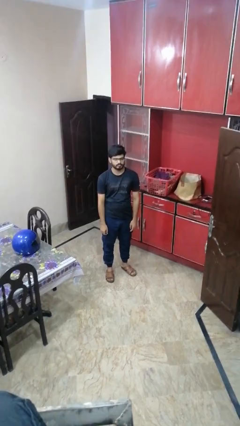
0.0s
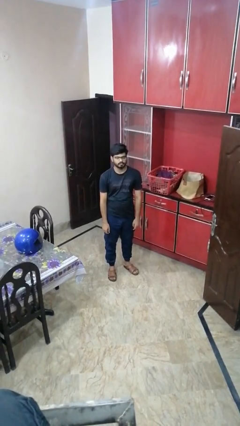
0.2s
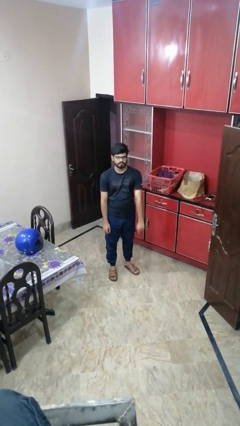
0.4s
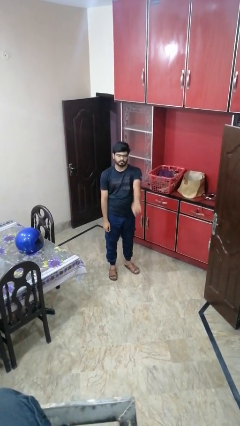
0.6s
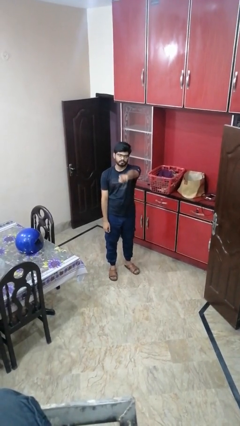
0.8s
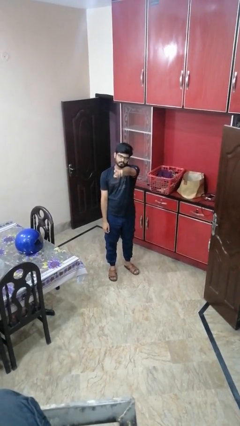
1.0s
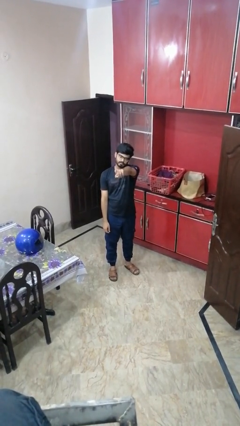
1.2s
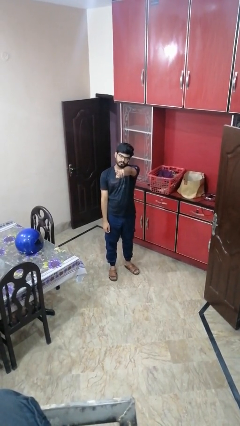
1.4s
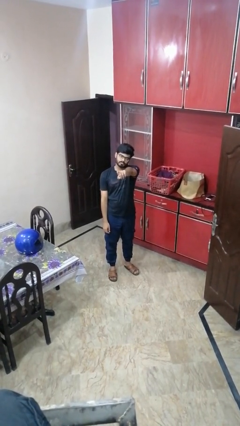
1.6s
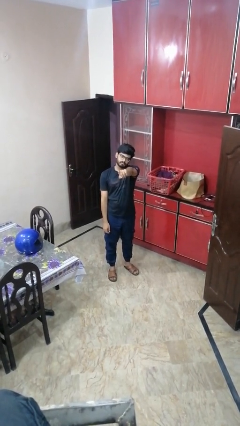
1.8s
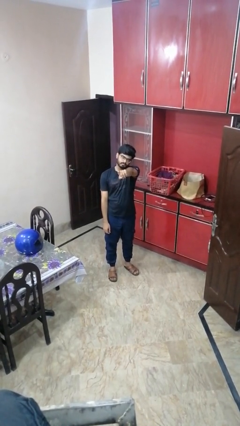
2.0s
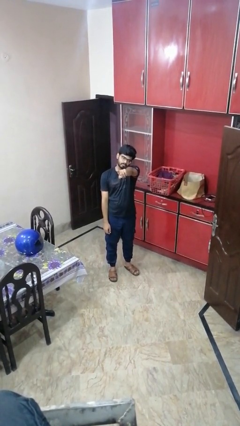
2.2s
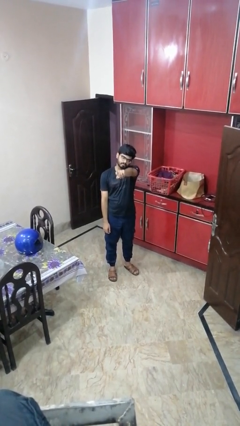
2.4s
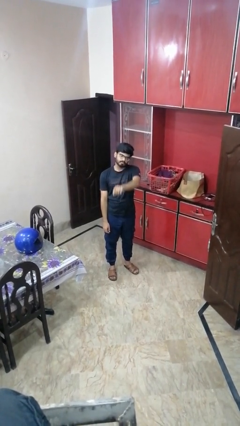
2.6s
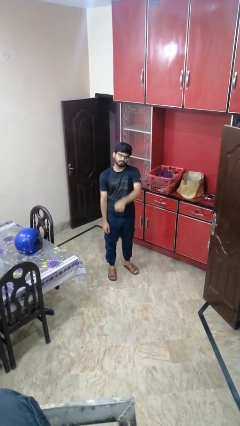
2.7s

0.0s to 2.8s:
person points at person

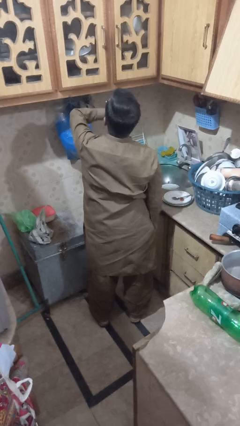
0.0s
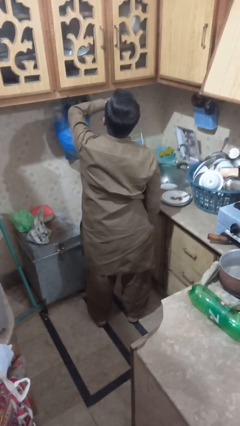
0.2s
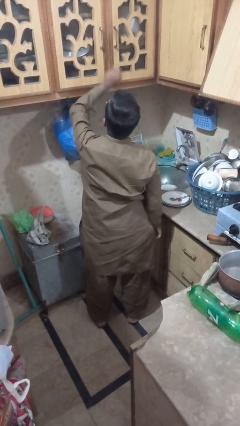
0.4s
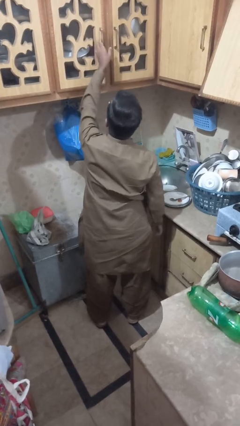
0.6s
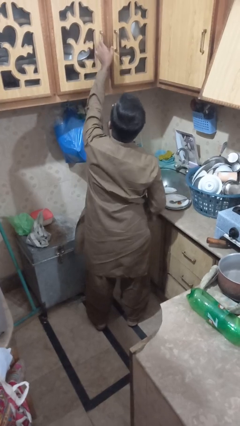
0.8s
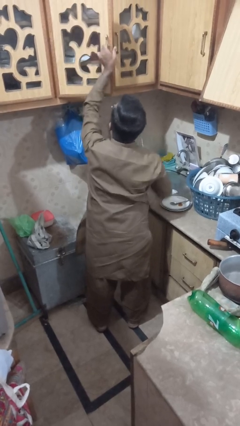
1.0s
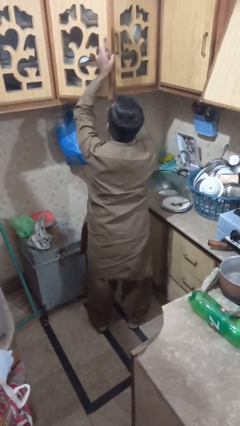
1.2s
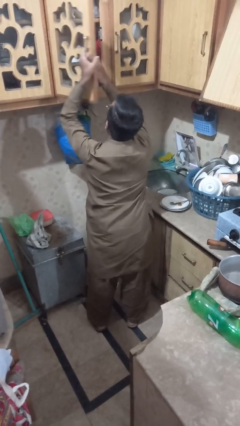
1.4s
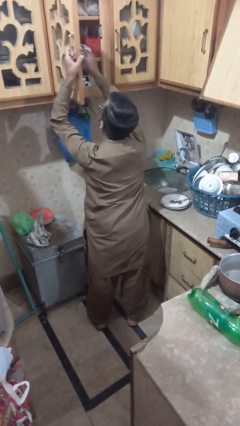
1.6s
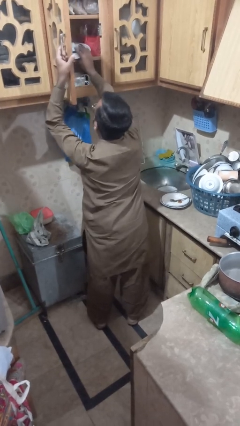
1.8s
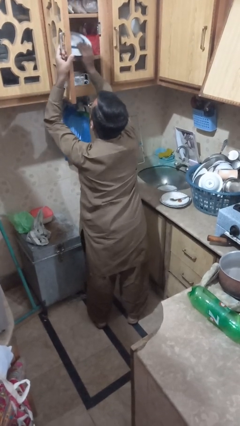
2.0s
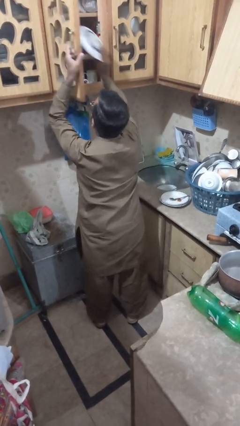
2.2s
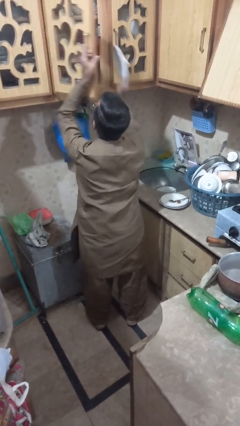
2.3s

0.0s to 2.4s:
person takes object from cabinet

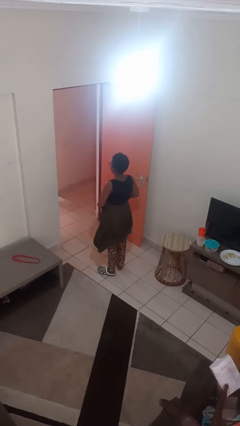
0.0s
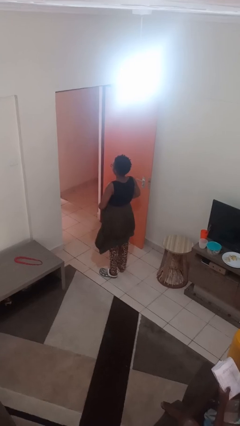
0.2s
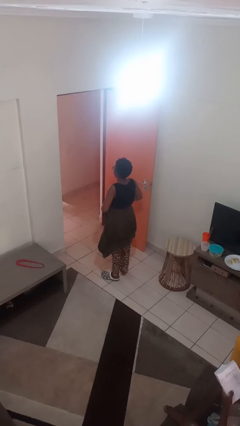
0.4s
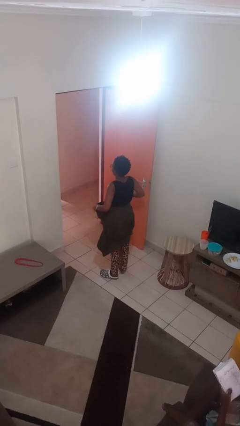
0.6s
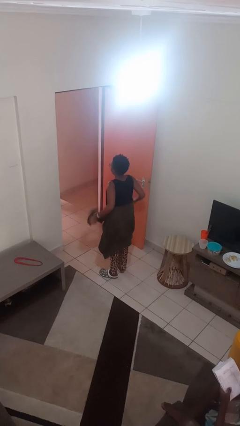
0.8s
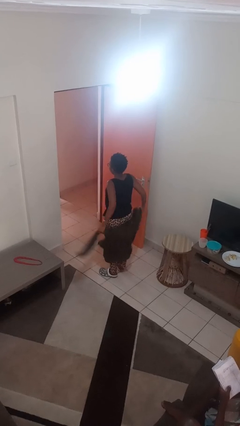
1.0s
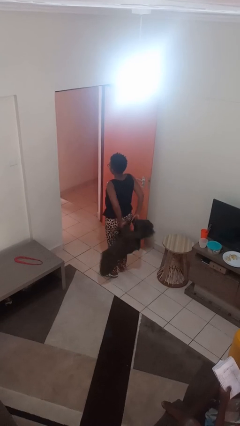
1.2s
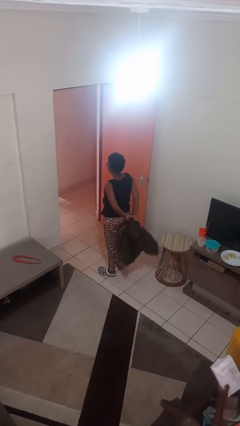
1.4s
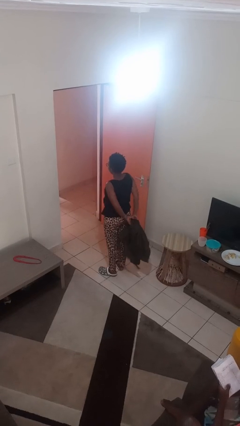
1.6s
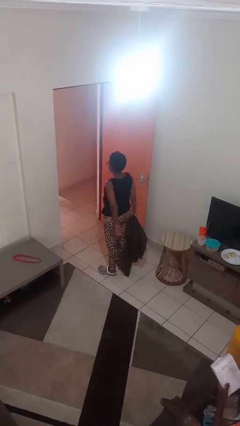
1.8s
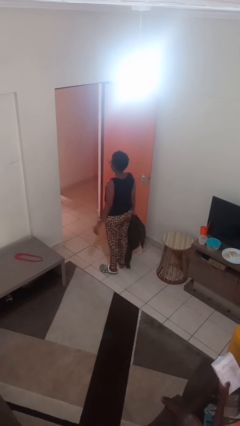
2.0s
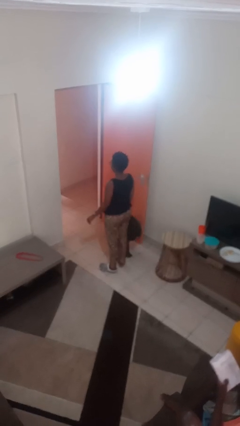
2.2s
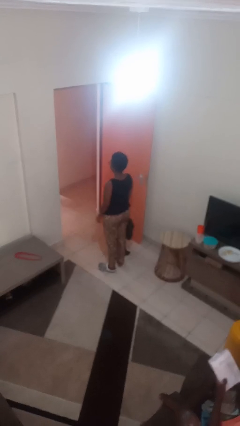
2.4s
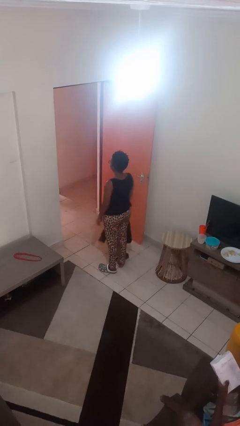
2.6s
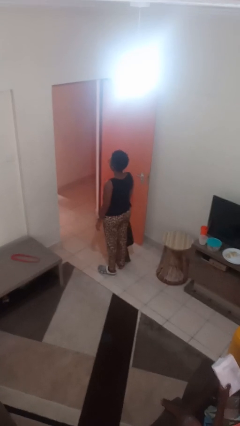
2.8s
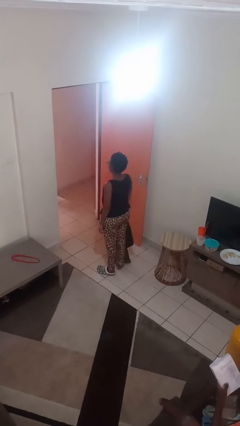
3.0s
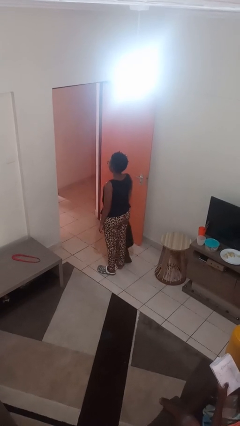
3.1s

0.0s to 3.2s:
person unties jacket around waist

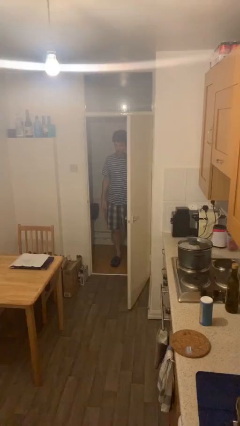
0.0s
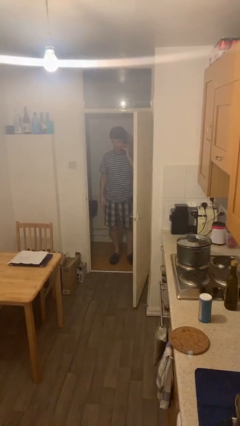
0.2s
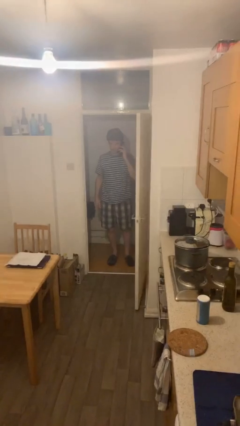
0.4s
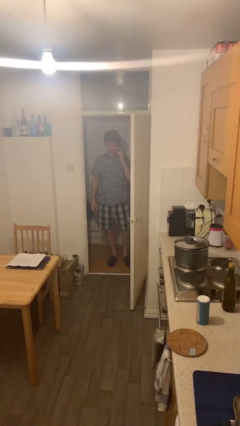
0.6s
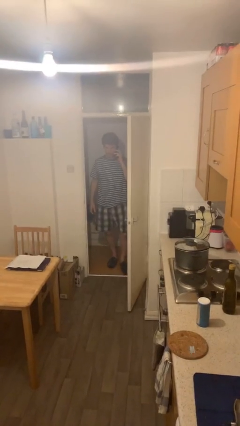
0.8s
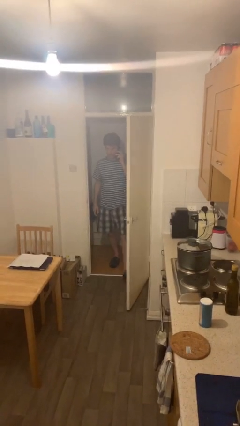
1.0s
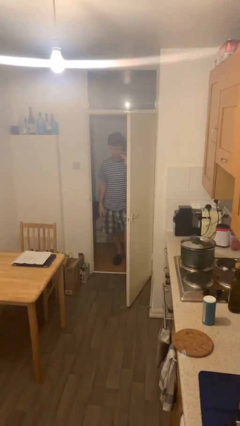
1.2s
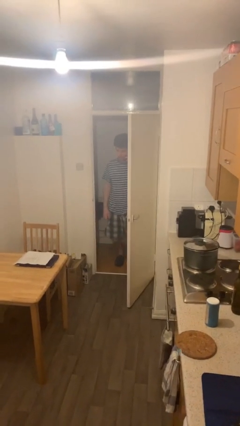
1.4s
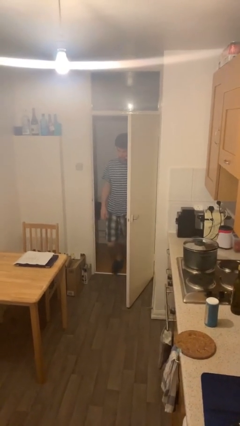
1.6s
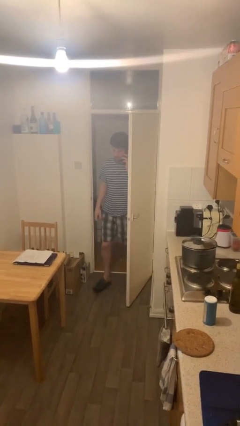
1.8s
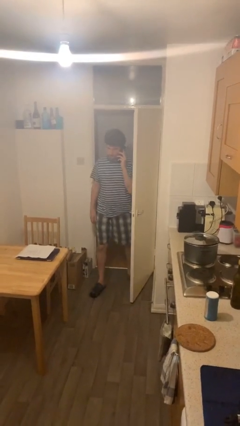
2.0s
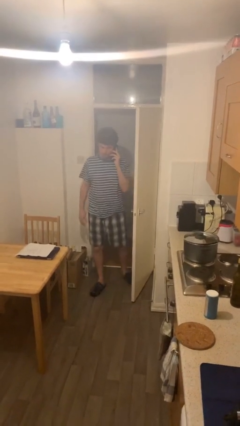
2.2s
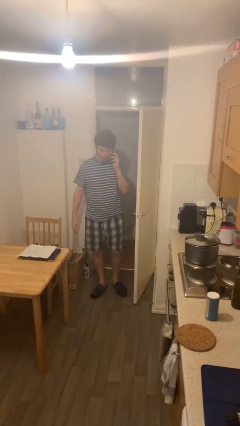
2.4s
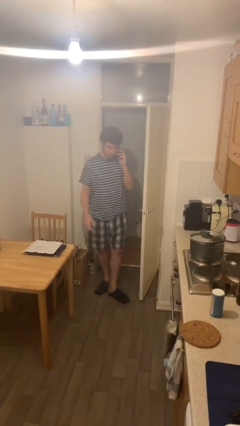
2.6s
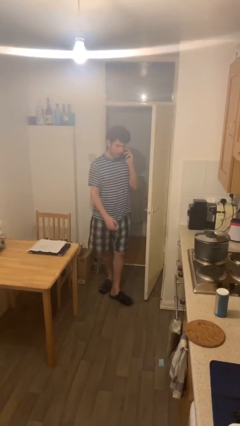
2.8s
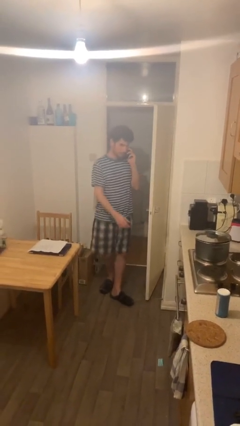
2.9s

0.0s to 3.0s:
person enters scene through structure

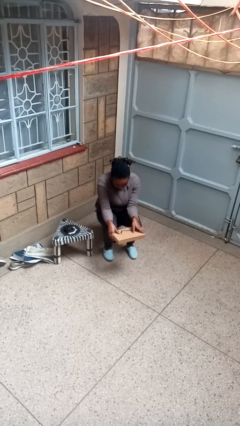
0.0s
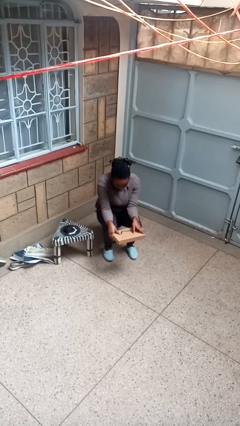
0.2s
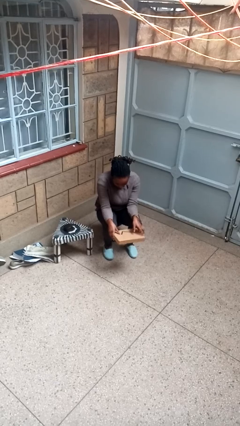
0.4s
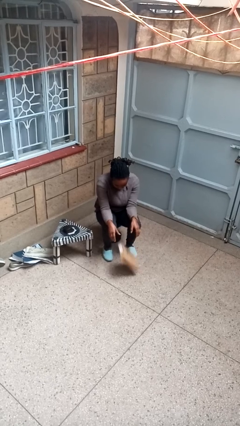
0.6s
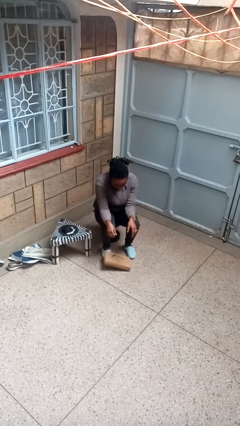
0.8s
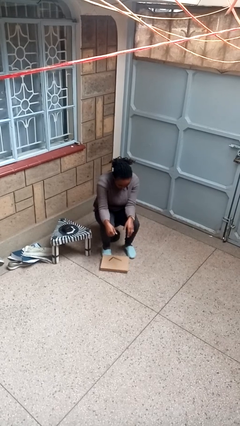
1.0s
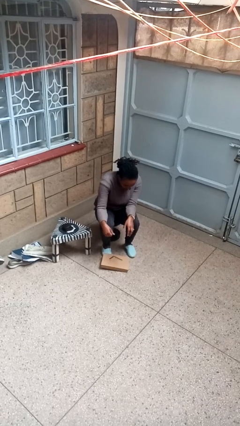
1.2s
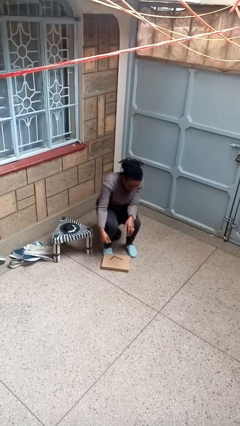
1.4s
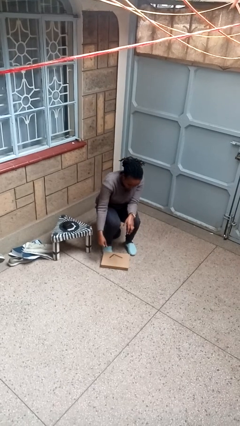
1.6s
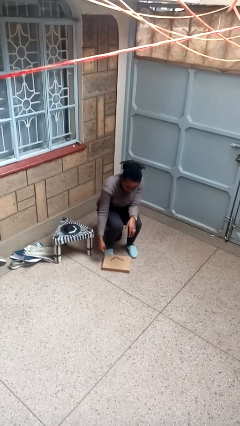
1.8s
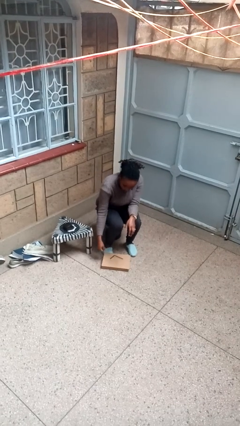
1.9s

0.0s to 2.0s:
person drops object

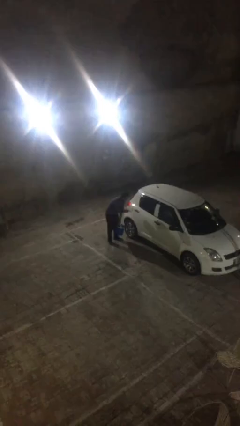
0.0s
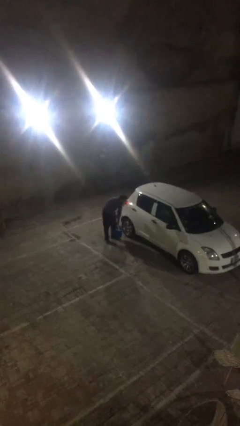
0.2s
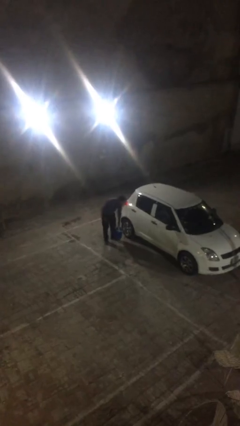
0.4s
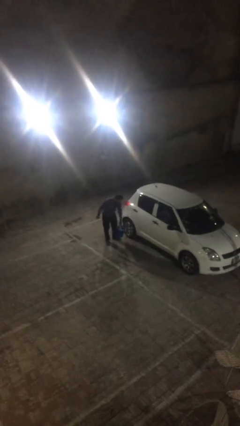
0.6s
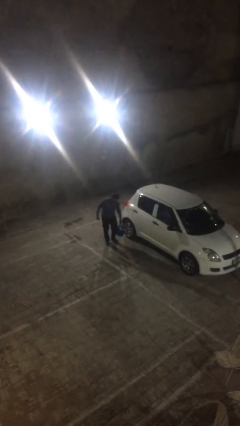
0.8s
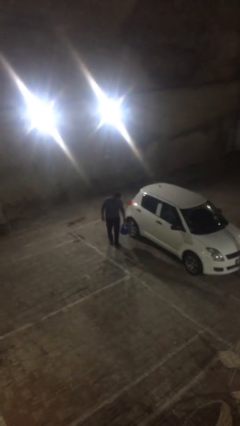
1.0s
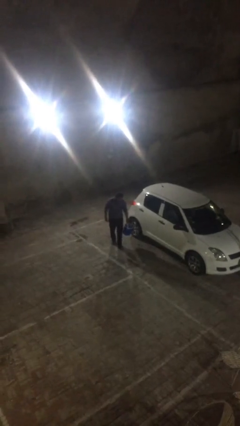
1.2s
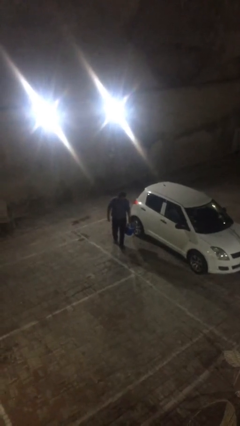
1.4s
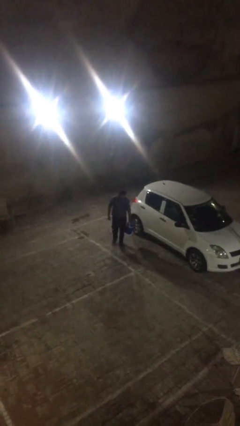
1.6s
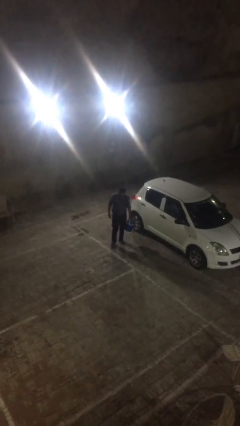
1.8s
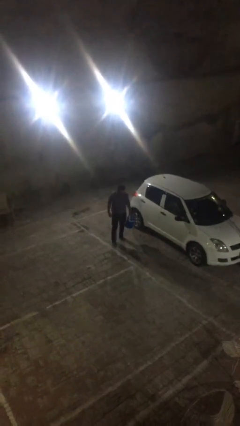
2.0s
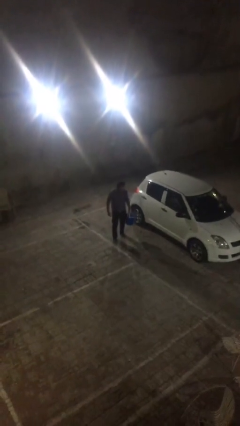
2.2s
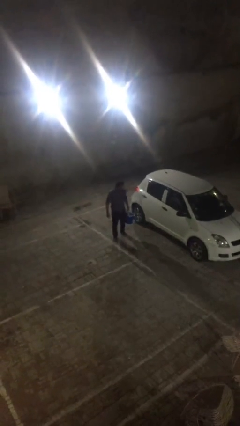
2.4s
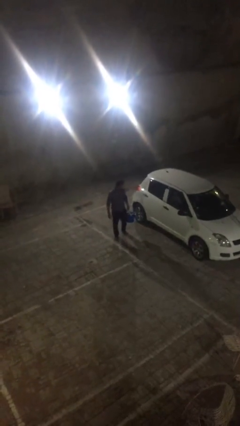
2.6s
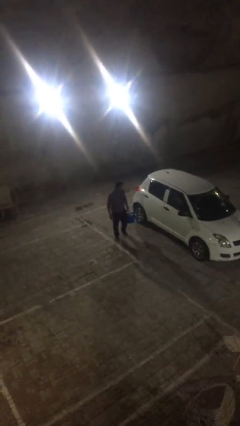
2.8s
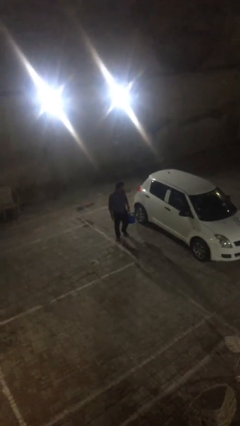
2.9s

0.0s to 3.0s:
person closes car door

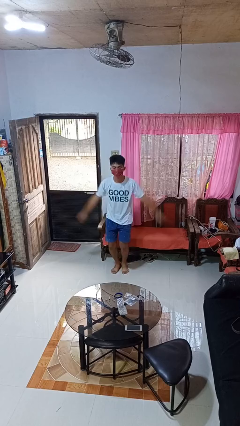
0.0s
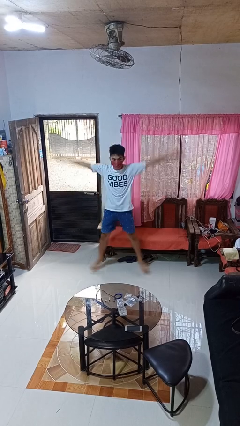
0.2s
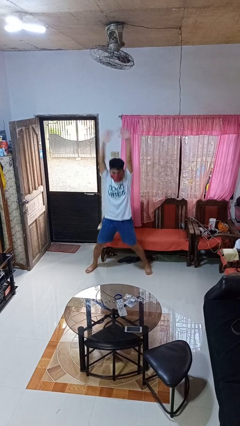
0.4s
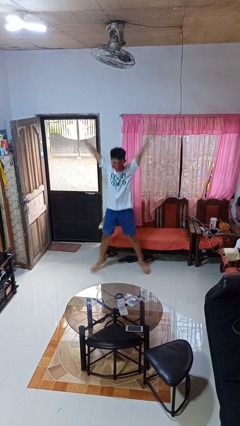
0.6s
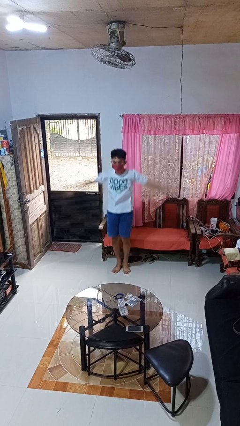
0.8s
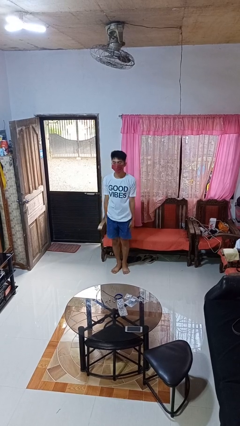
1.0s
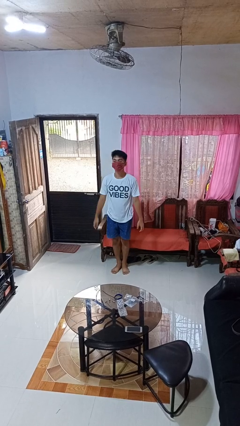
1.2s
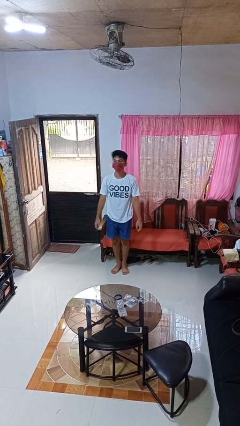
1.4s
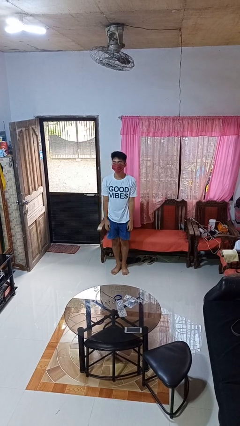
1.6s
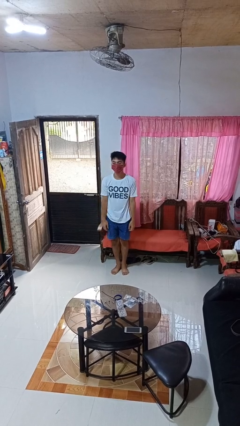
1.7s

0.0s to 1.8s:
person exercises with jumping jacks
